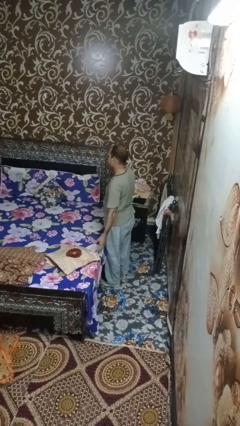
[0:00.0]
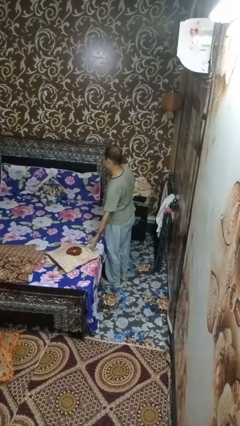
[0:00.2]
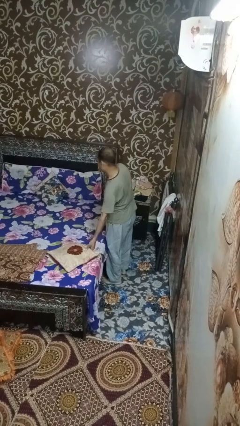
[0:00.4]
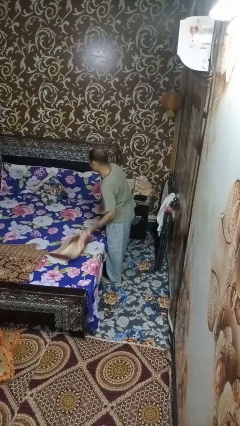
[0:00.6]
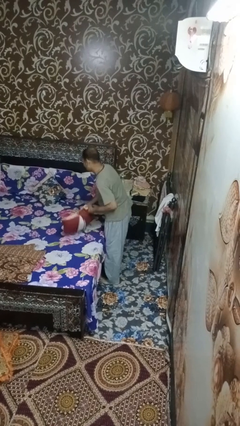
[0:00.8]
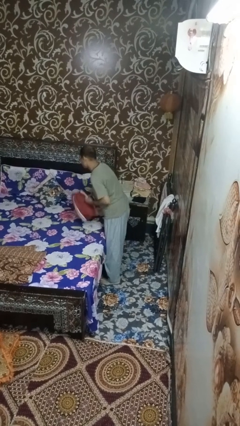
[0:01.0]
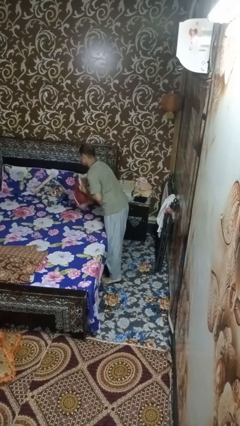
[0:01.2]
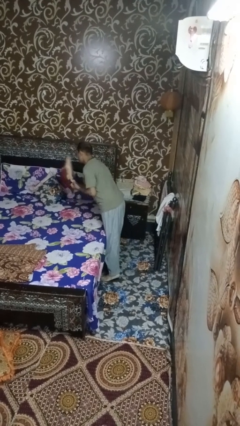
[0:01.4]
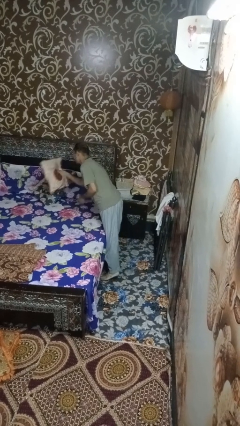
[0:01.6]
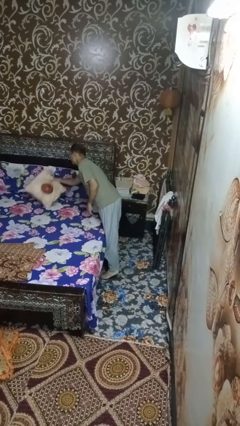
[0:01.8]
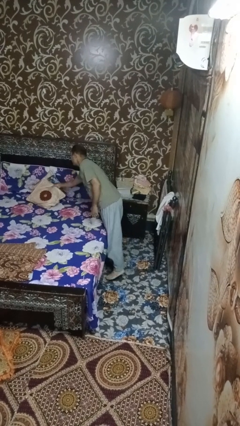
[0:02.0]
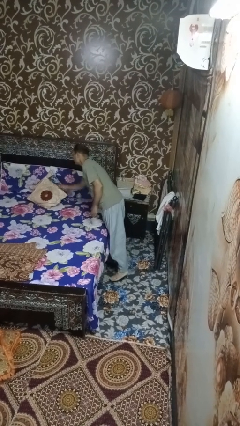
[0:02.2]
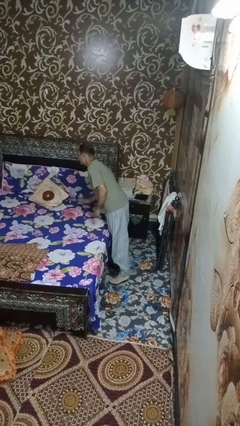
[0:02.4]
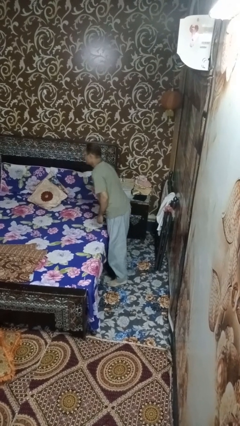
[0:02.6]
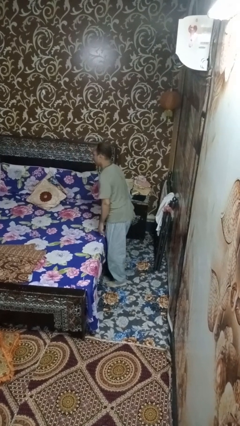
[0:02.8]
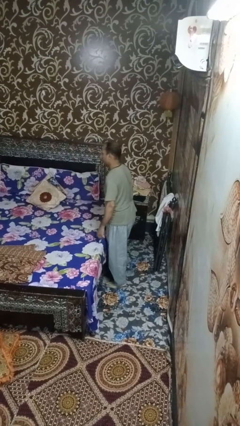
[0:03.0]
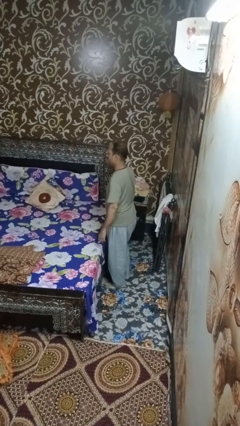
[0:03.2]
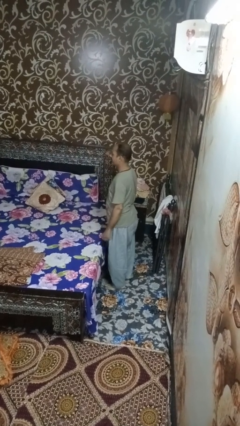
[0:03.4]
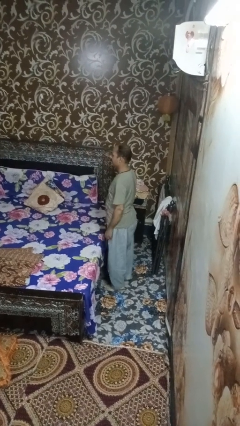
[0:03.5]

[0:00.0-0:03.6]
person makes bed

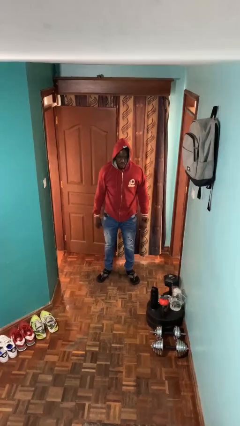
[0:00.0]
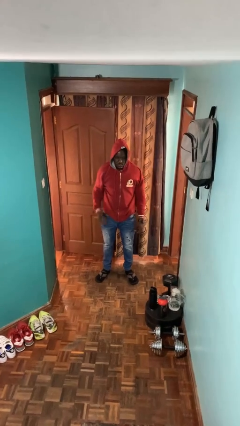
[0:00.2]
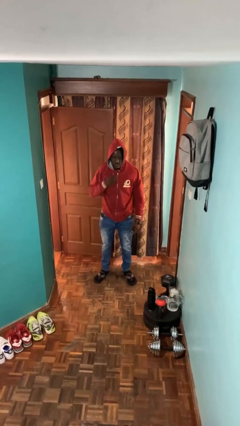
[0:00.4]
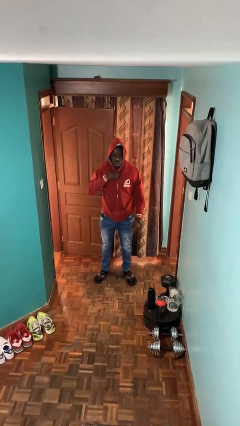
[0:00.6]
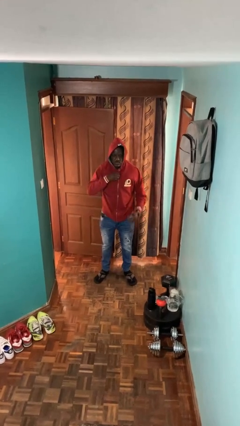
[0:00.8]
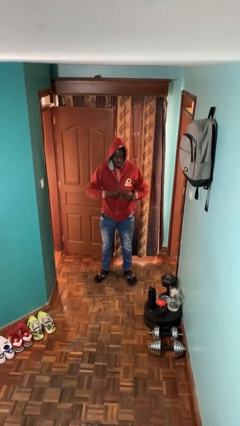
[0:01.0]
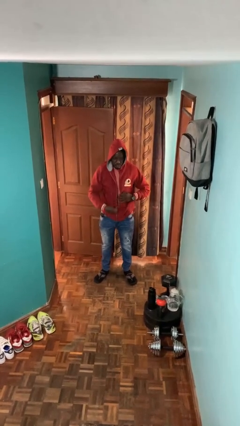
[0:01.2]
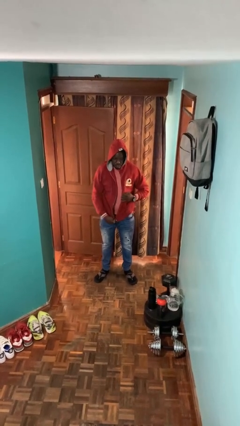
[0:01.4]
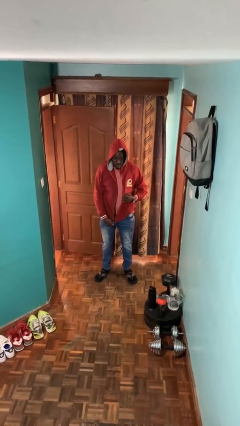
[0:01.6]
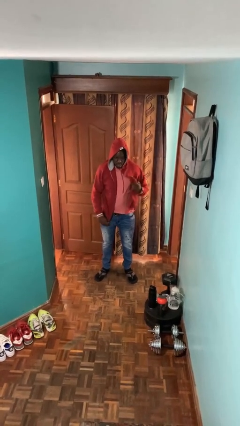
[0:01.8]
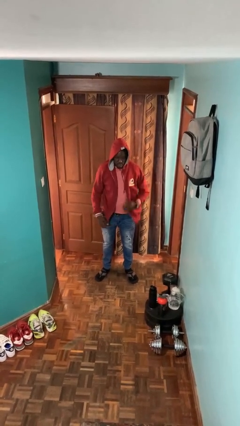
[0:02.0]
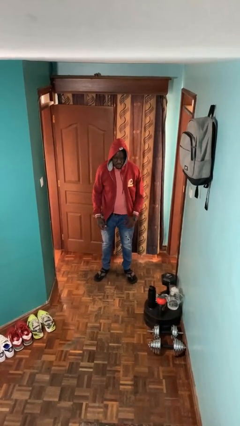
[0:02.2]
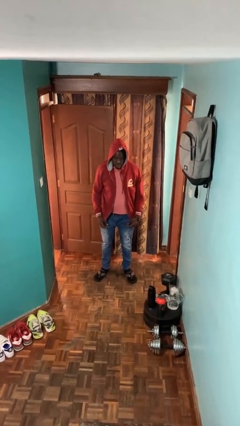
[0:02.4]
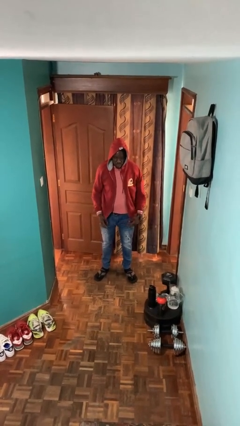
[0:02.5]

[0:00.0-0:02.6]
person unzips jacket

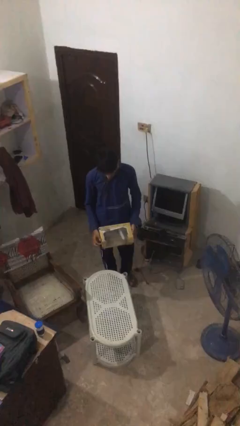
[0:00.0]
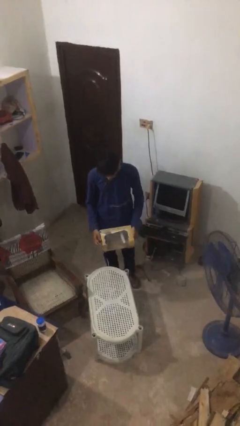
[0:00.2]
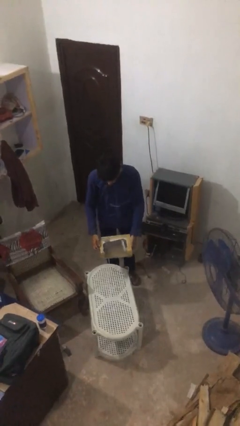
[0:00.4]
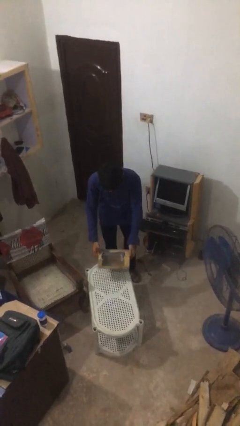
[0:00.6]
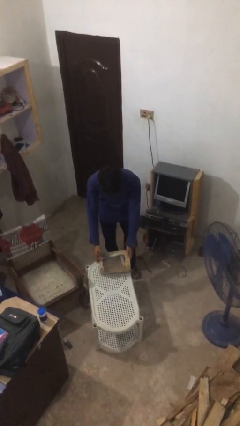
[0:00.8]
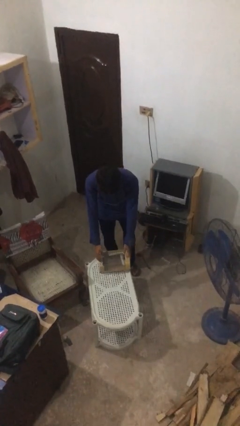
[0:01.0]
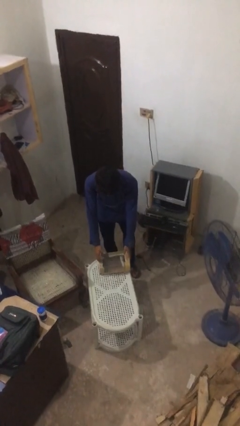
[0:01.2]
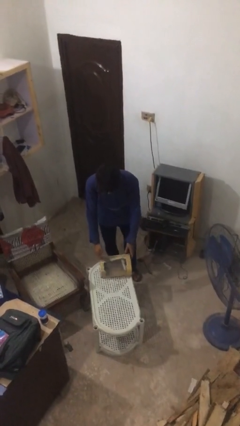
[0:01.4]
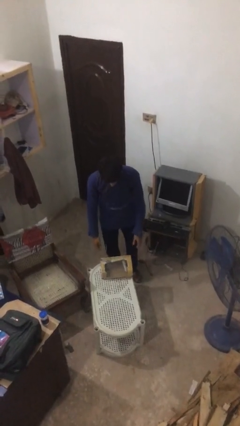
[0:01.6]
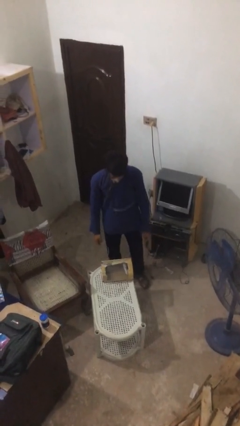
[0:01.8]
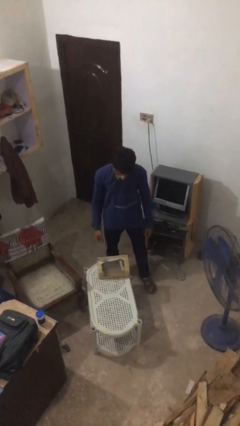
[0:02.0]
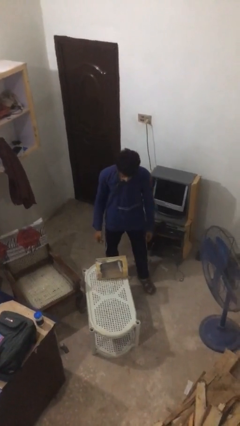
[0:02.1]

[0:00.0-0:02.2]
person puts down object on table

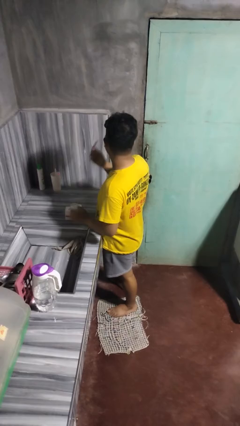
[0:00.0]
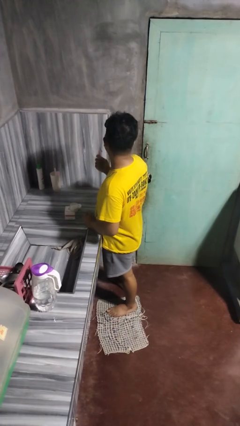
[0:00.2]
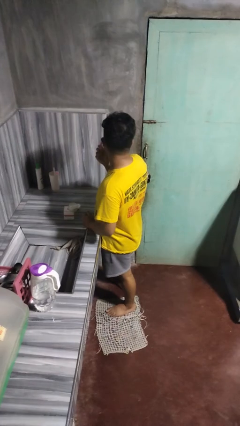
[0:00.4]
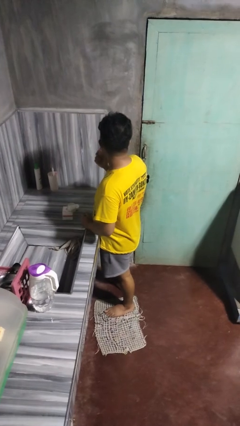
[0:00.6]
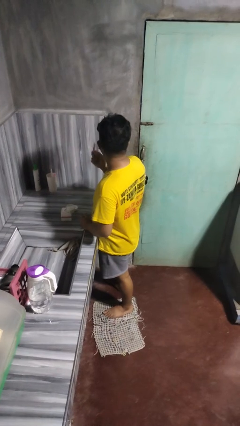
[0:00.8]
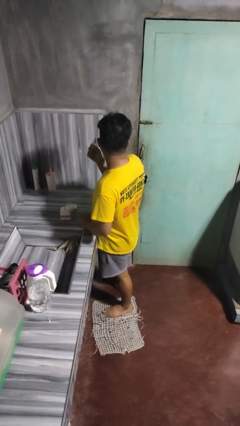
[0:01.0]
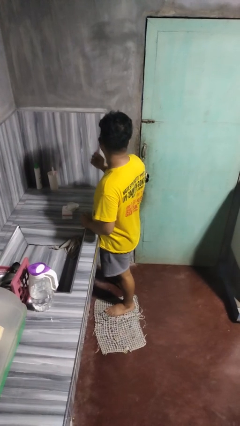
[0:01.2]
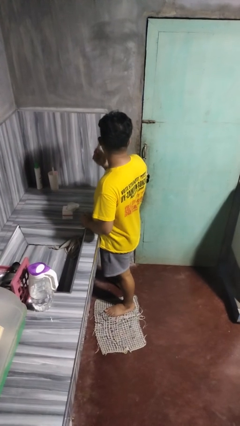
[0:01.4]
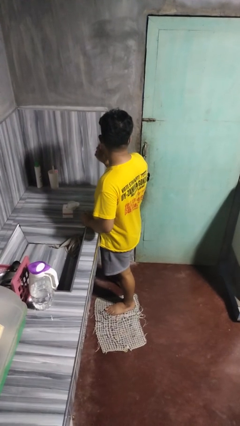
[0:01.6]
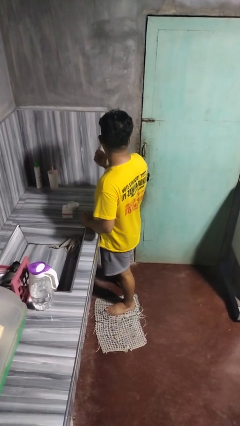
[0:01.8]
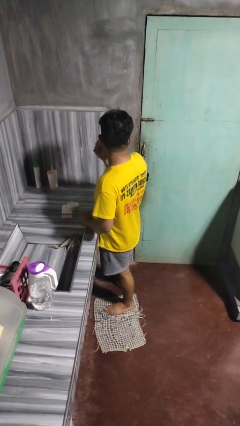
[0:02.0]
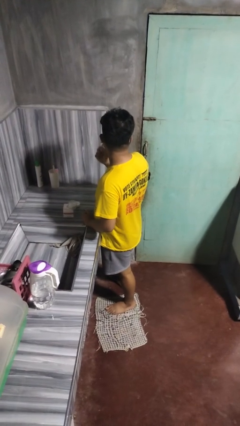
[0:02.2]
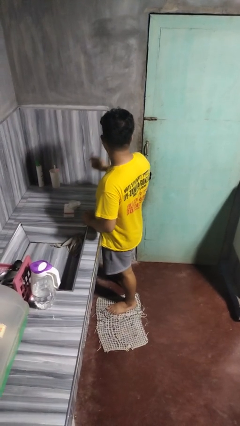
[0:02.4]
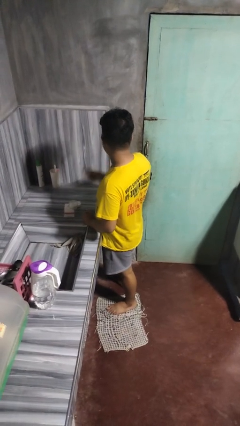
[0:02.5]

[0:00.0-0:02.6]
person shaves face

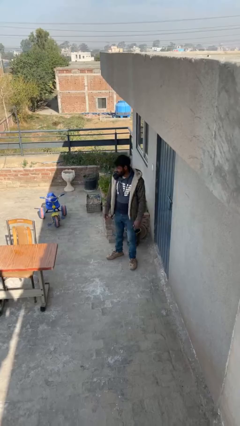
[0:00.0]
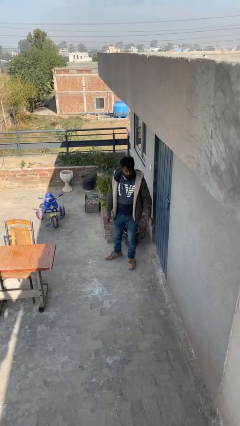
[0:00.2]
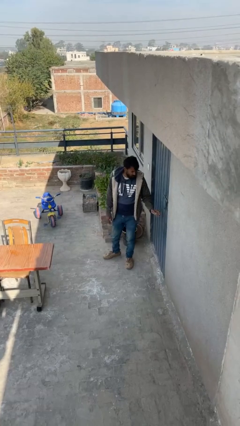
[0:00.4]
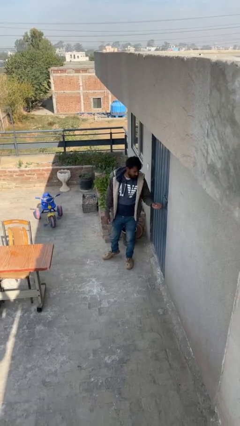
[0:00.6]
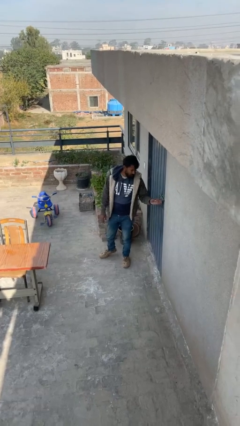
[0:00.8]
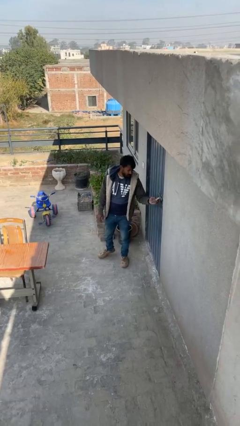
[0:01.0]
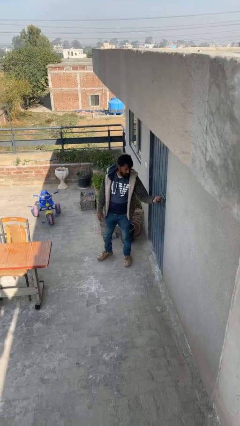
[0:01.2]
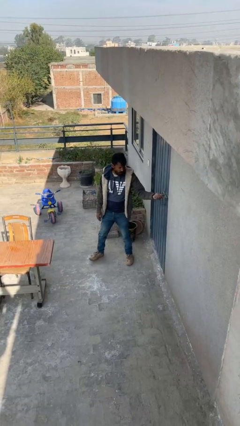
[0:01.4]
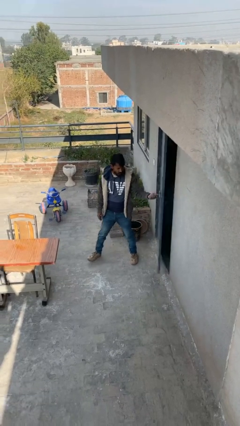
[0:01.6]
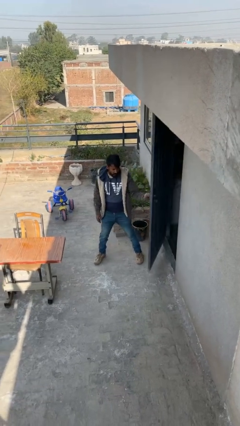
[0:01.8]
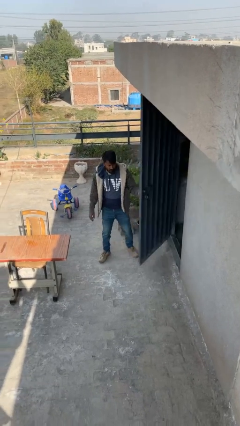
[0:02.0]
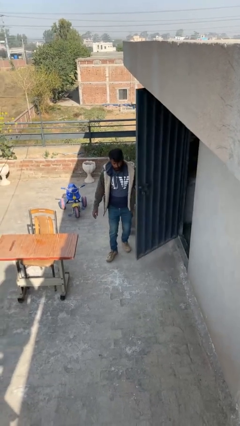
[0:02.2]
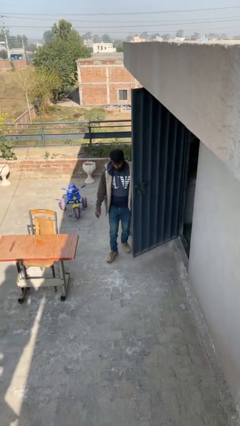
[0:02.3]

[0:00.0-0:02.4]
person opens facility door

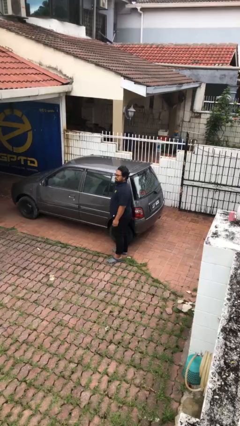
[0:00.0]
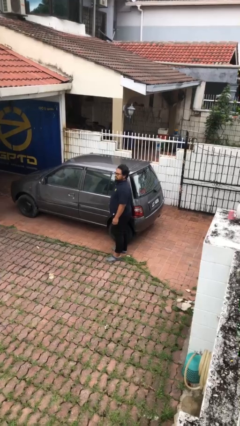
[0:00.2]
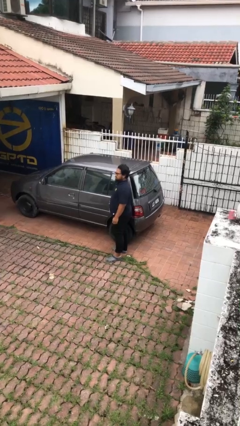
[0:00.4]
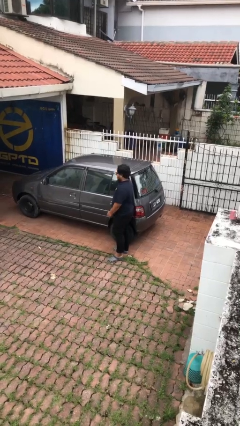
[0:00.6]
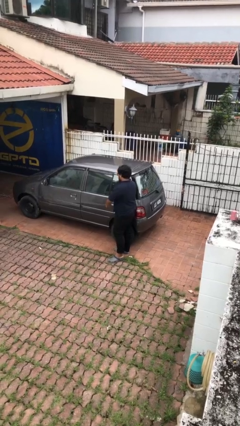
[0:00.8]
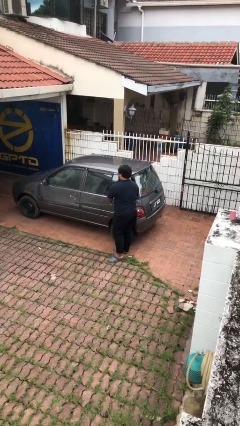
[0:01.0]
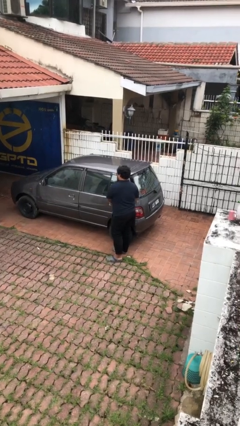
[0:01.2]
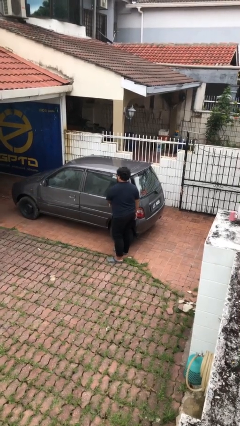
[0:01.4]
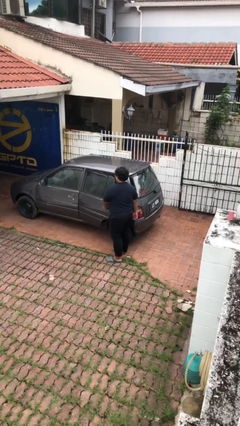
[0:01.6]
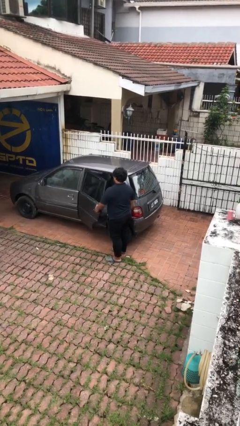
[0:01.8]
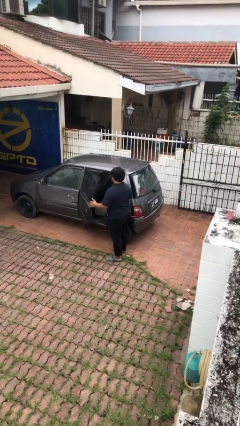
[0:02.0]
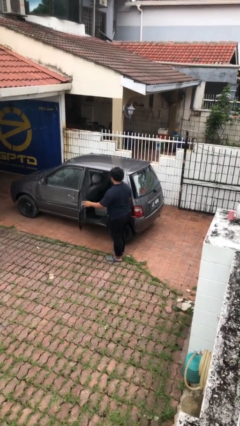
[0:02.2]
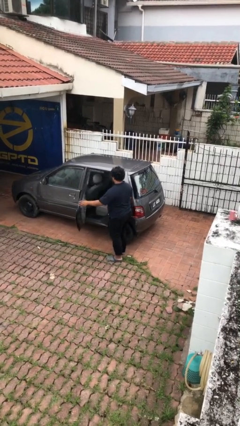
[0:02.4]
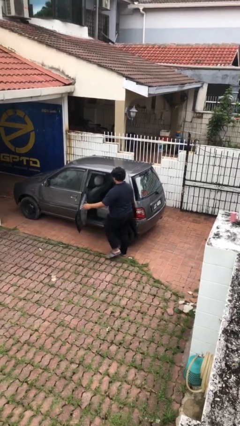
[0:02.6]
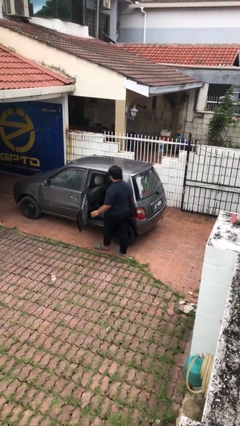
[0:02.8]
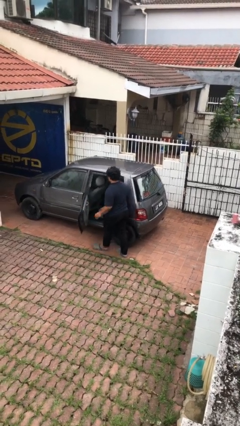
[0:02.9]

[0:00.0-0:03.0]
person opens car door

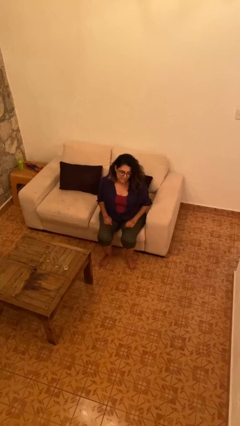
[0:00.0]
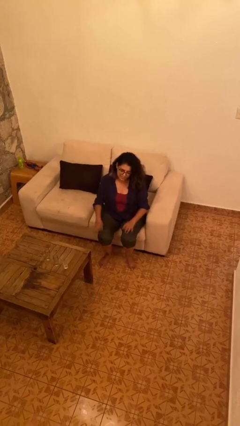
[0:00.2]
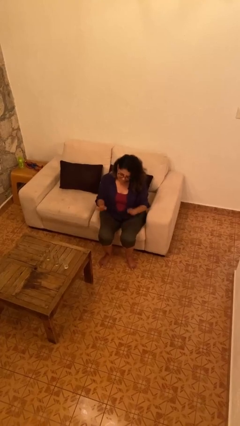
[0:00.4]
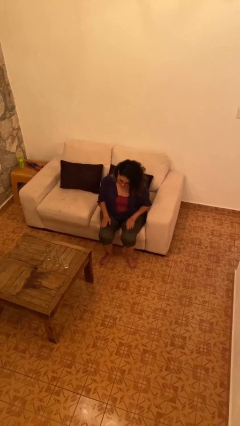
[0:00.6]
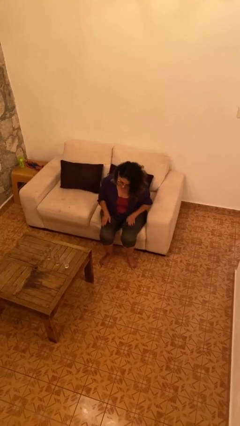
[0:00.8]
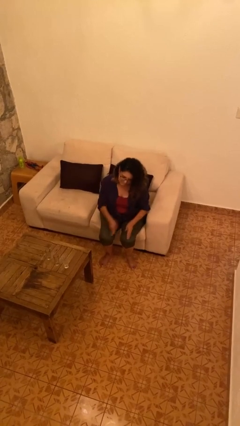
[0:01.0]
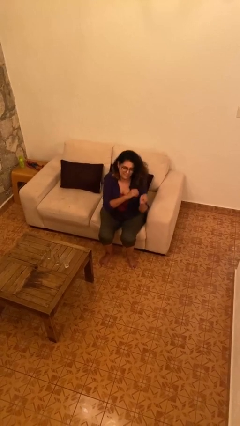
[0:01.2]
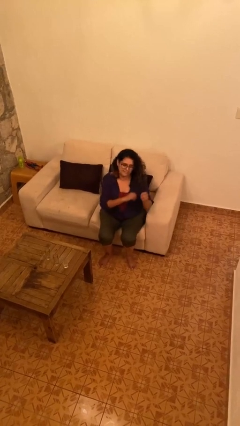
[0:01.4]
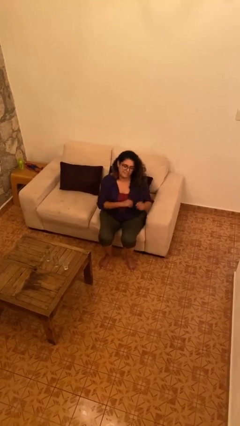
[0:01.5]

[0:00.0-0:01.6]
person slaps hands on thighs
